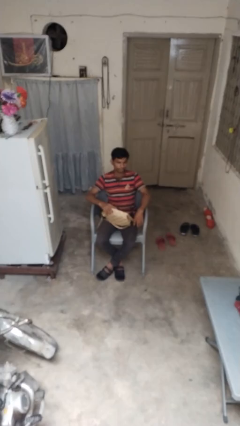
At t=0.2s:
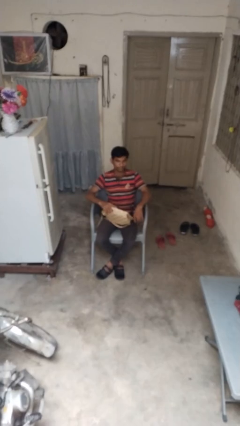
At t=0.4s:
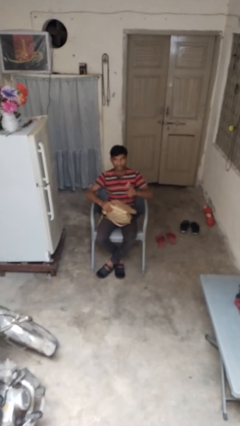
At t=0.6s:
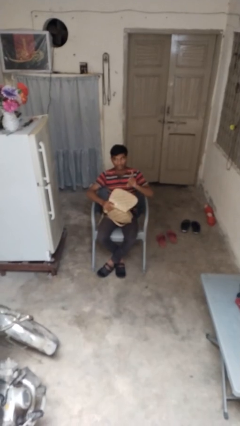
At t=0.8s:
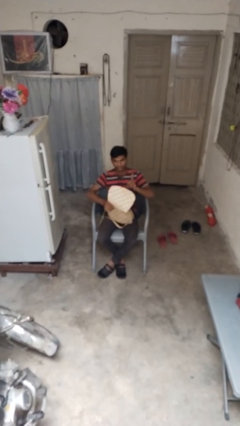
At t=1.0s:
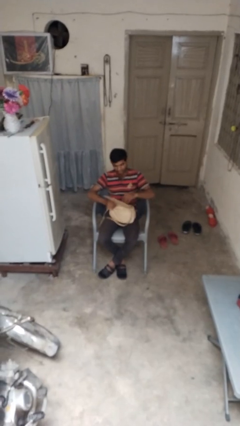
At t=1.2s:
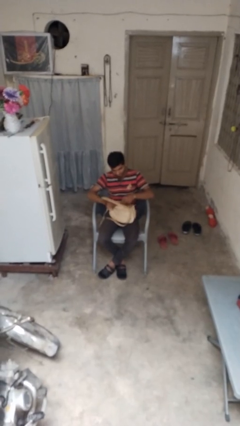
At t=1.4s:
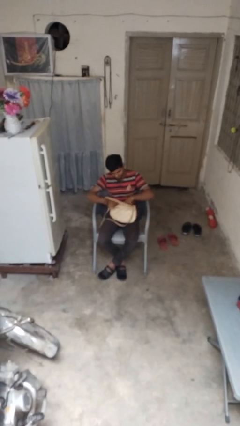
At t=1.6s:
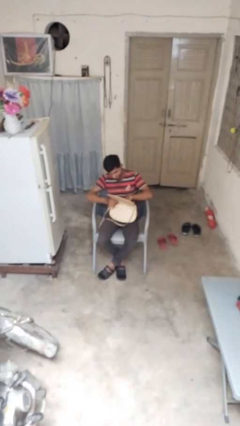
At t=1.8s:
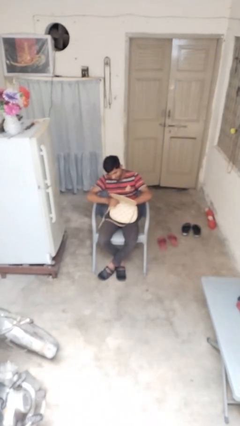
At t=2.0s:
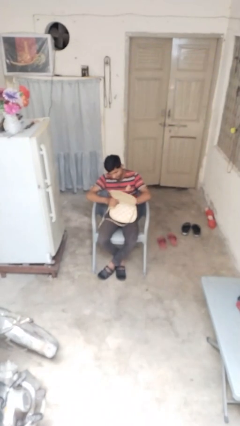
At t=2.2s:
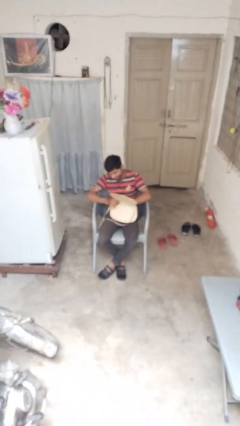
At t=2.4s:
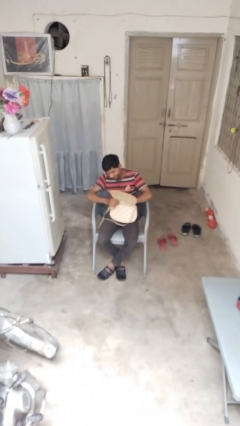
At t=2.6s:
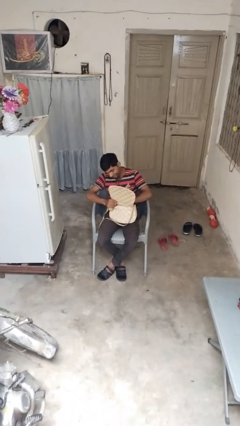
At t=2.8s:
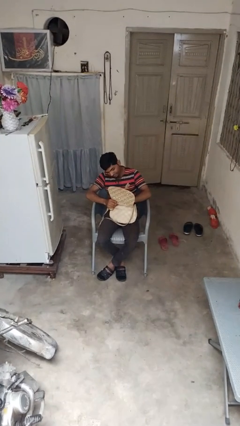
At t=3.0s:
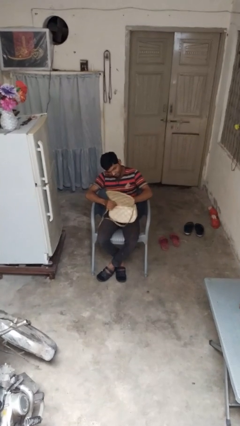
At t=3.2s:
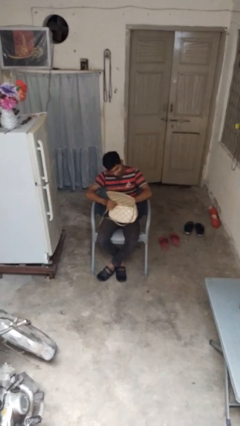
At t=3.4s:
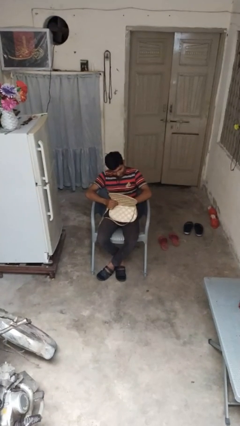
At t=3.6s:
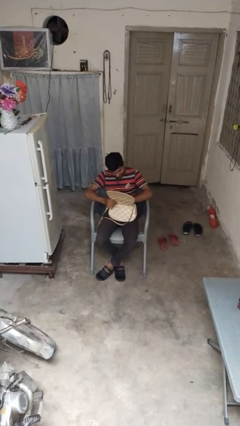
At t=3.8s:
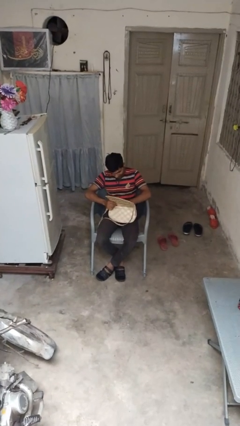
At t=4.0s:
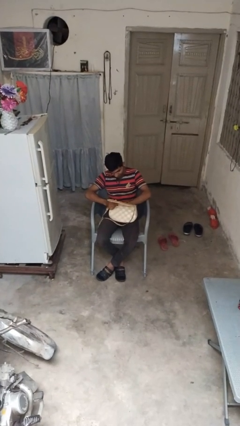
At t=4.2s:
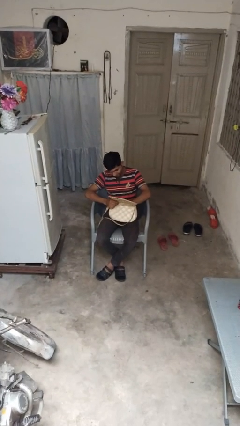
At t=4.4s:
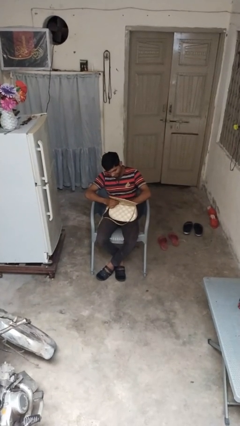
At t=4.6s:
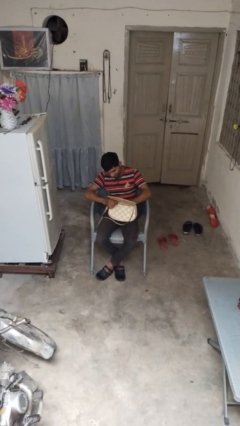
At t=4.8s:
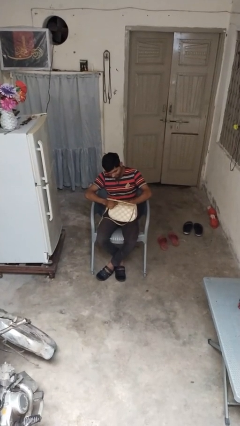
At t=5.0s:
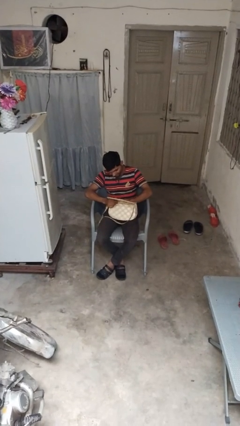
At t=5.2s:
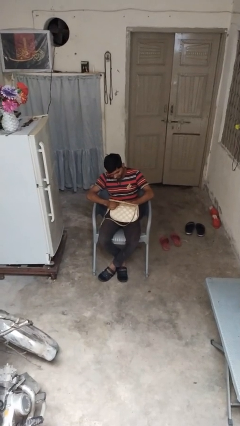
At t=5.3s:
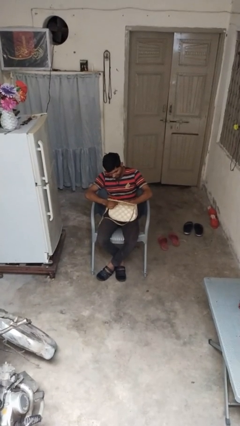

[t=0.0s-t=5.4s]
person searches in purse

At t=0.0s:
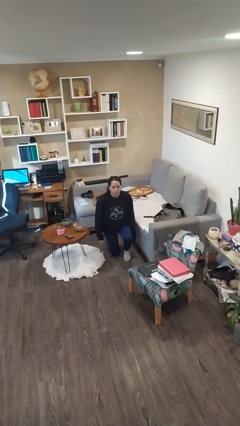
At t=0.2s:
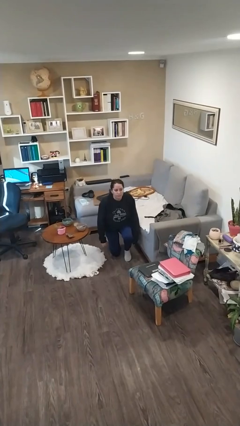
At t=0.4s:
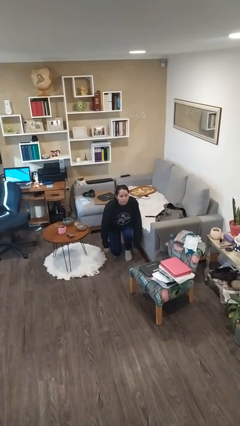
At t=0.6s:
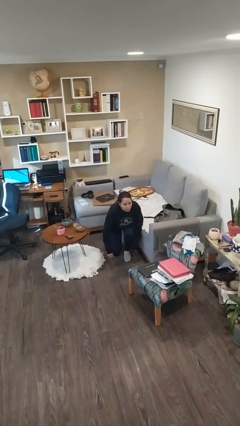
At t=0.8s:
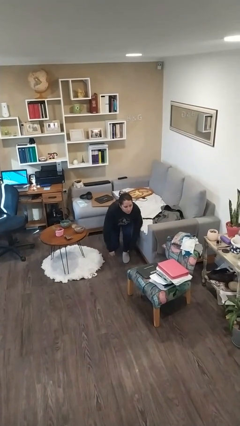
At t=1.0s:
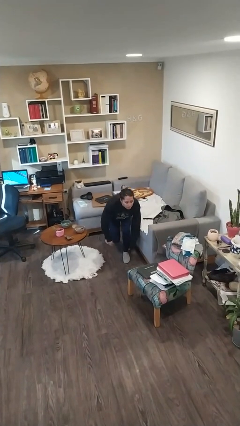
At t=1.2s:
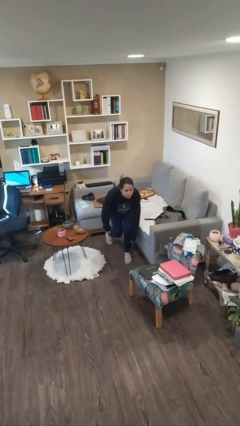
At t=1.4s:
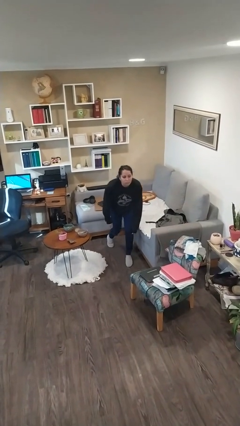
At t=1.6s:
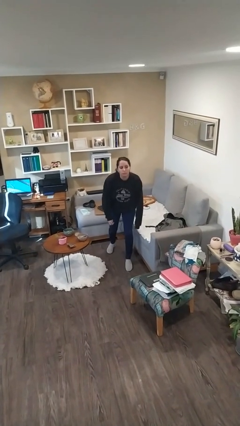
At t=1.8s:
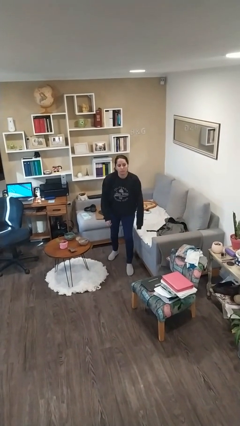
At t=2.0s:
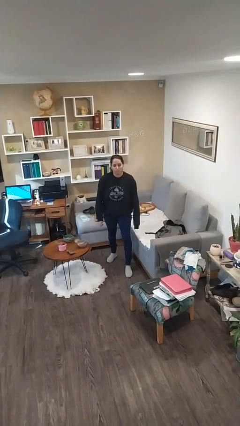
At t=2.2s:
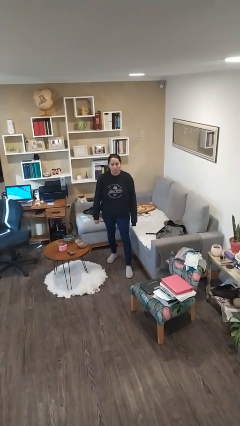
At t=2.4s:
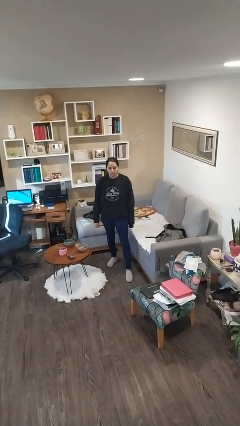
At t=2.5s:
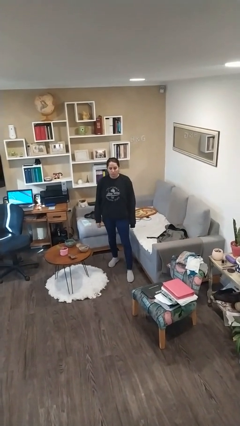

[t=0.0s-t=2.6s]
person stands up from floor

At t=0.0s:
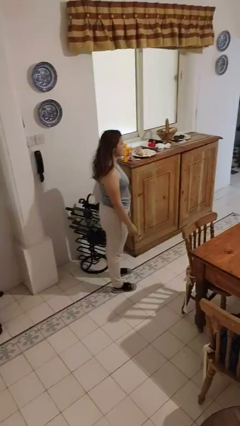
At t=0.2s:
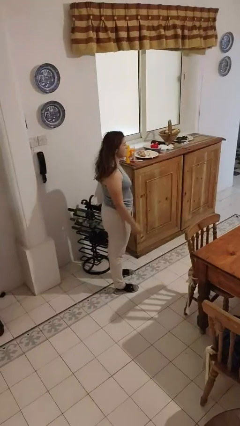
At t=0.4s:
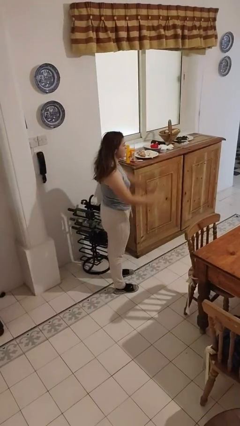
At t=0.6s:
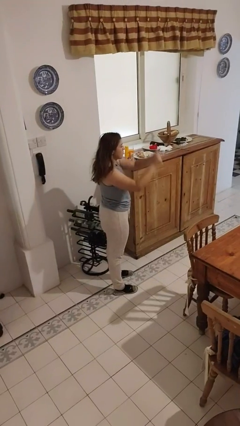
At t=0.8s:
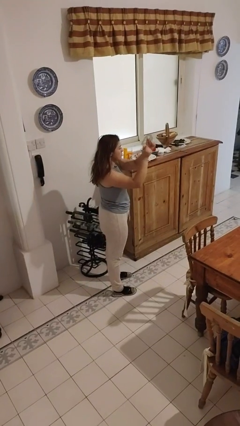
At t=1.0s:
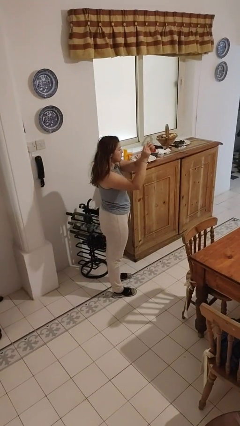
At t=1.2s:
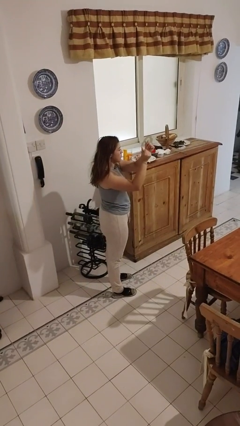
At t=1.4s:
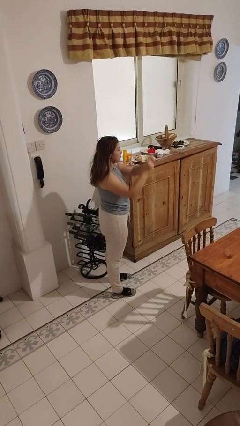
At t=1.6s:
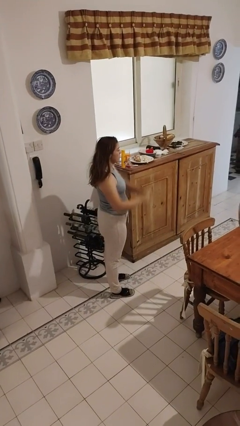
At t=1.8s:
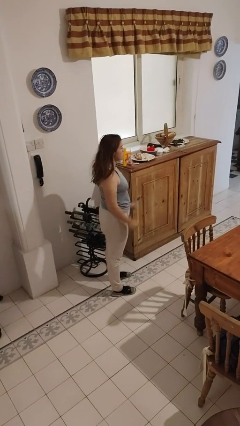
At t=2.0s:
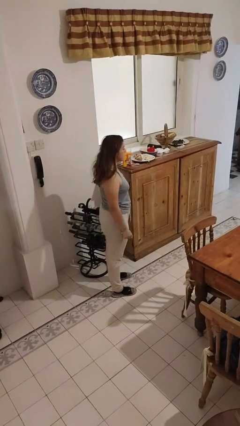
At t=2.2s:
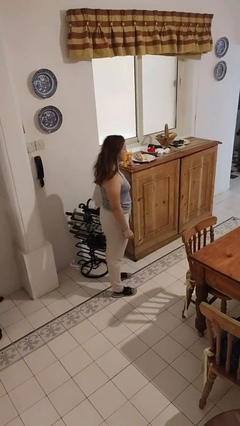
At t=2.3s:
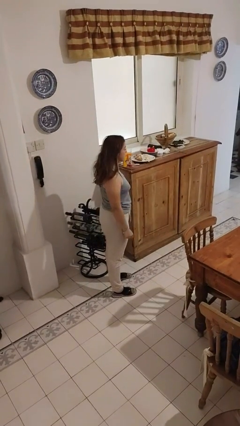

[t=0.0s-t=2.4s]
person snaps fingers

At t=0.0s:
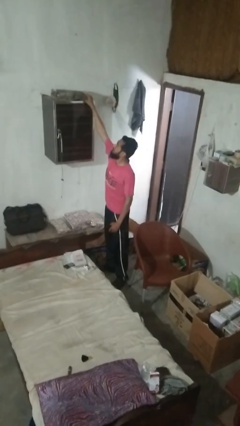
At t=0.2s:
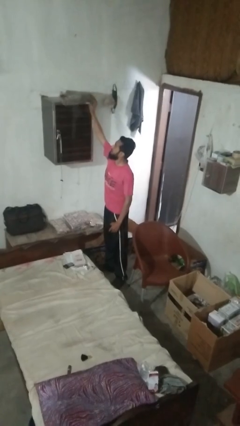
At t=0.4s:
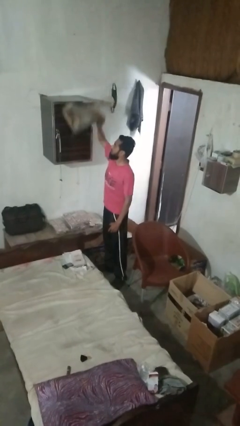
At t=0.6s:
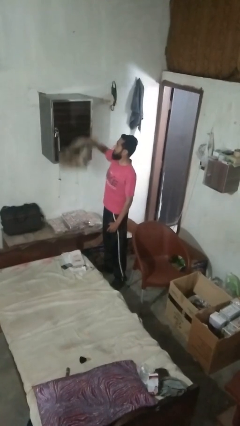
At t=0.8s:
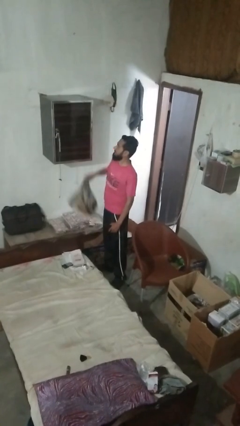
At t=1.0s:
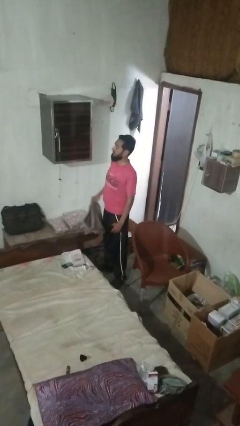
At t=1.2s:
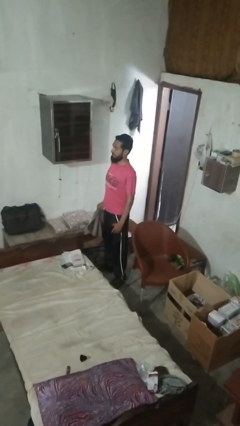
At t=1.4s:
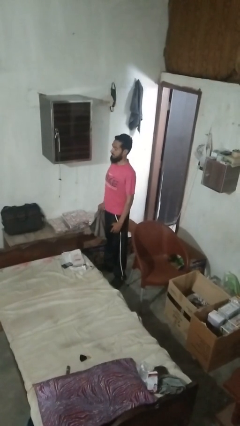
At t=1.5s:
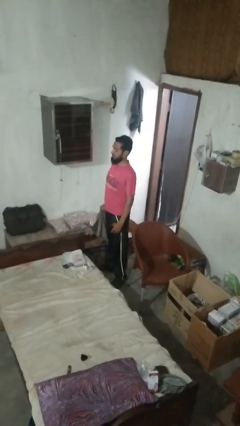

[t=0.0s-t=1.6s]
person picks up object from shelf

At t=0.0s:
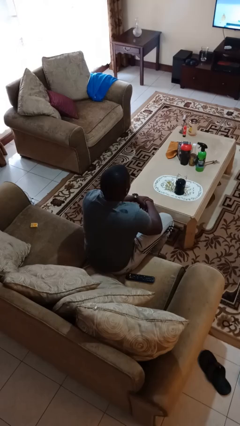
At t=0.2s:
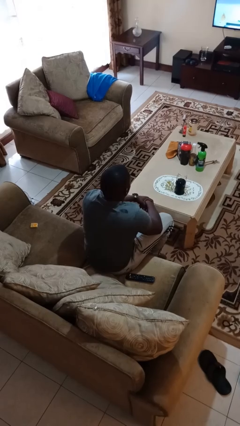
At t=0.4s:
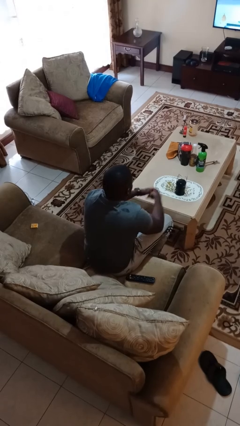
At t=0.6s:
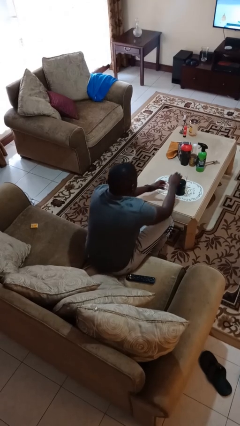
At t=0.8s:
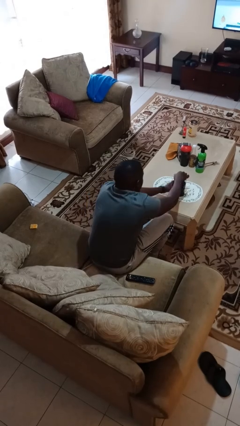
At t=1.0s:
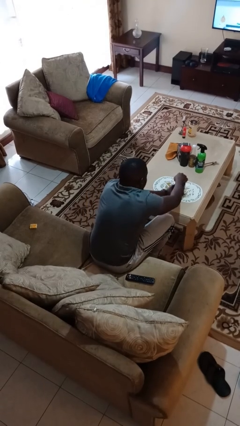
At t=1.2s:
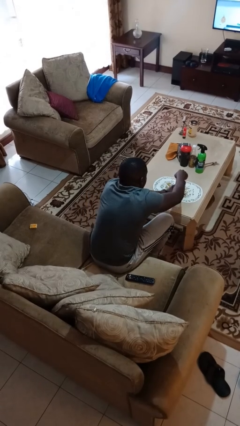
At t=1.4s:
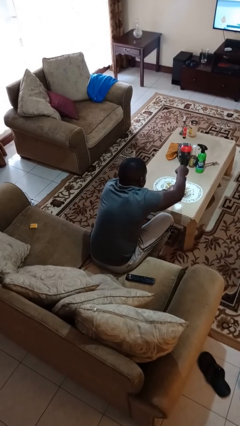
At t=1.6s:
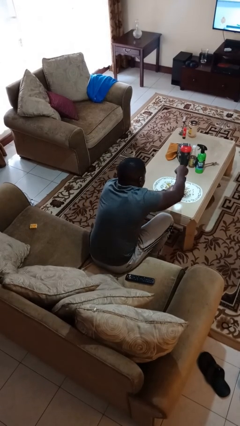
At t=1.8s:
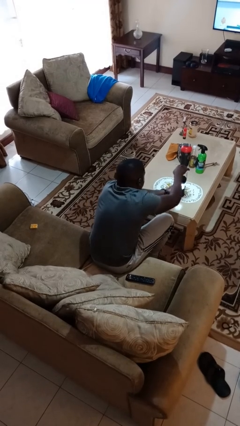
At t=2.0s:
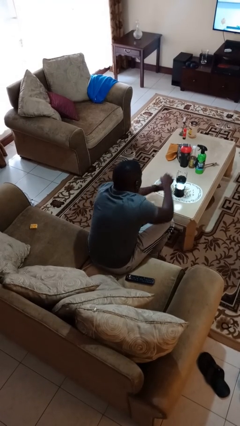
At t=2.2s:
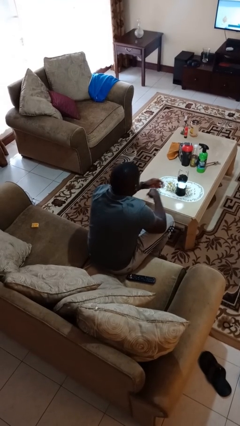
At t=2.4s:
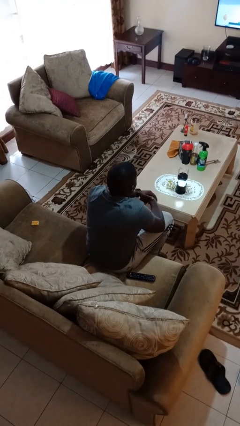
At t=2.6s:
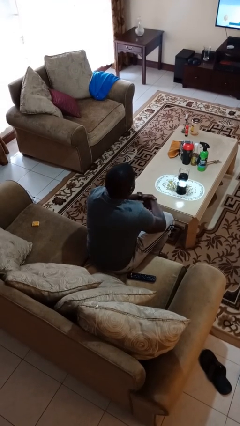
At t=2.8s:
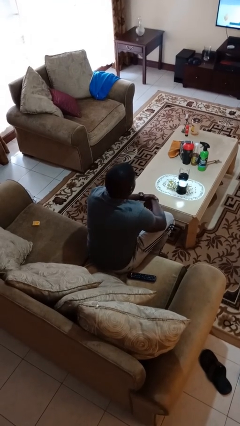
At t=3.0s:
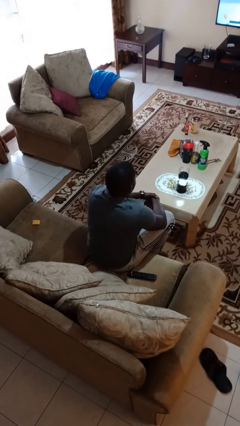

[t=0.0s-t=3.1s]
person turns on lamp

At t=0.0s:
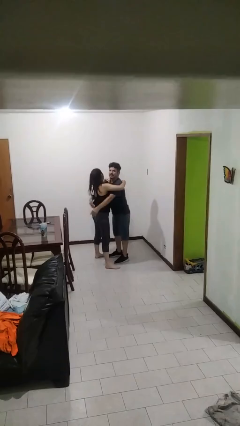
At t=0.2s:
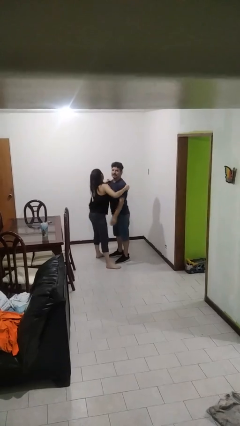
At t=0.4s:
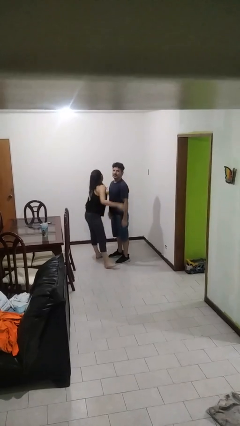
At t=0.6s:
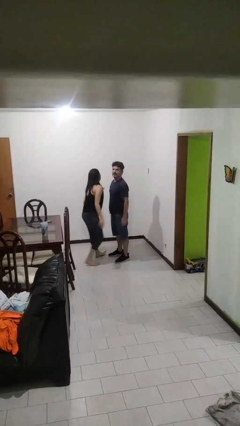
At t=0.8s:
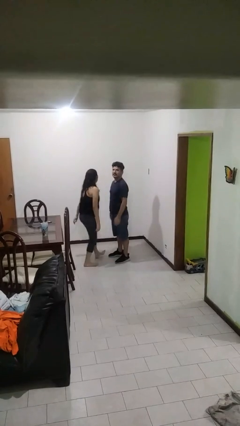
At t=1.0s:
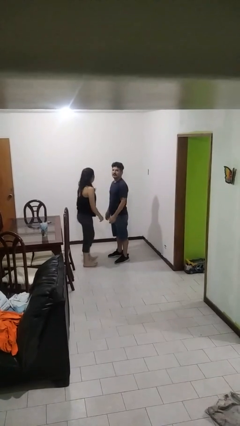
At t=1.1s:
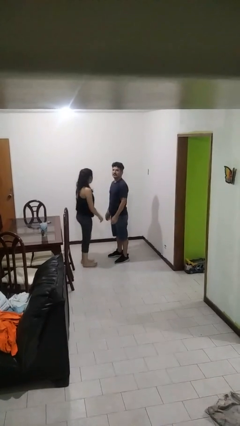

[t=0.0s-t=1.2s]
person puts down person

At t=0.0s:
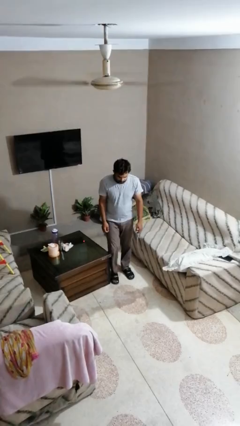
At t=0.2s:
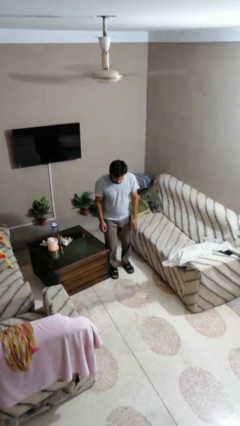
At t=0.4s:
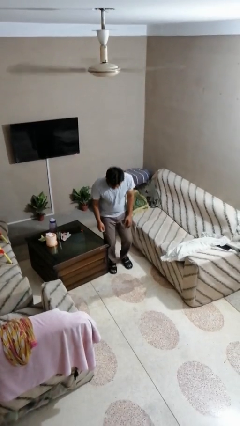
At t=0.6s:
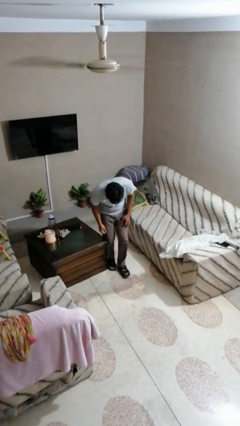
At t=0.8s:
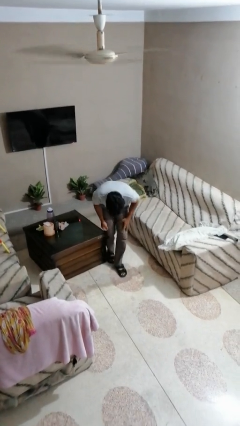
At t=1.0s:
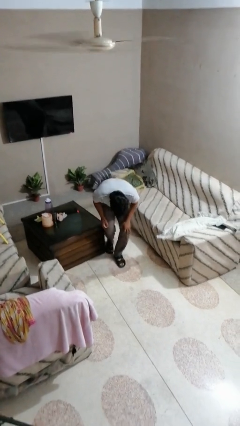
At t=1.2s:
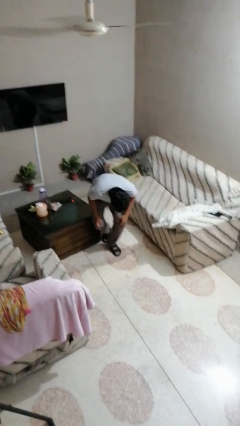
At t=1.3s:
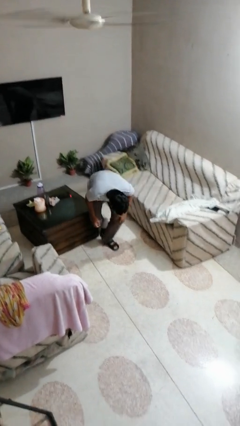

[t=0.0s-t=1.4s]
person trips on object on floor
